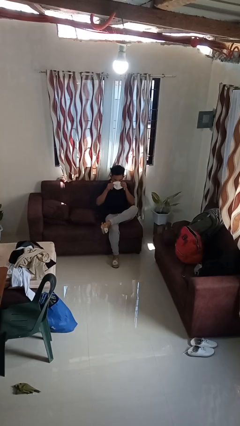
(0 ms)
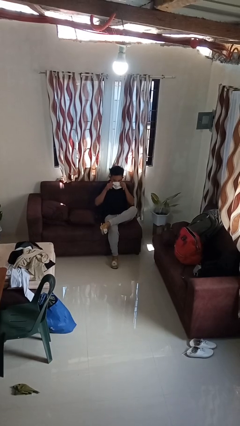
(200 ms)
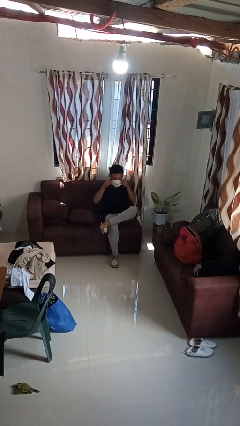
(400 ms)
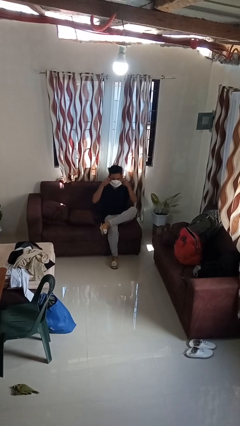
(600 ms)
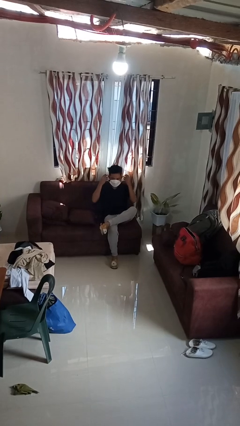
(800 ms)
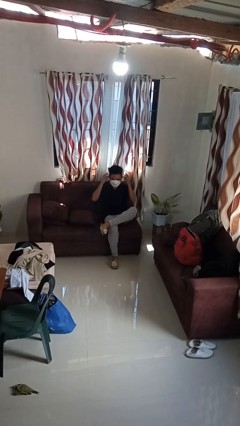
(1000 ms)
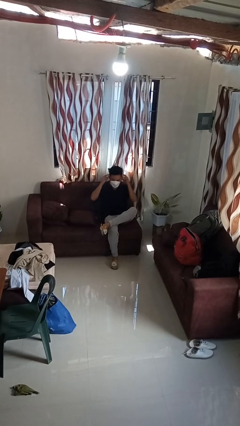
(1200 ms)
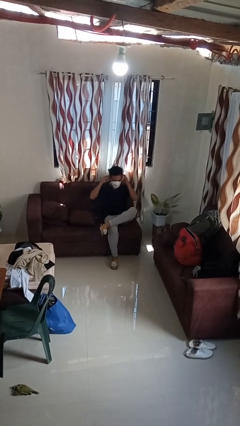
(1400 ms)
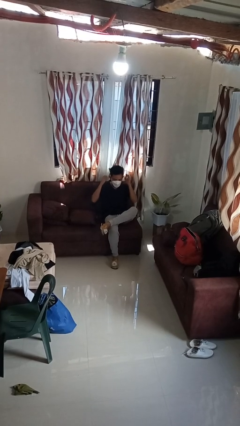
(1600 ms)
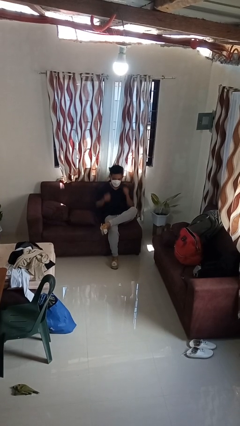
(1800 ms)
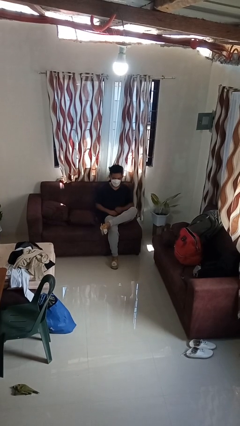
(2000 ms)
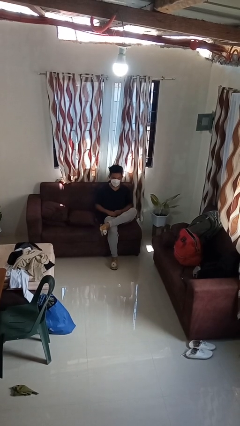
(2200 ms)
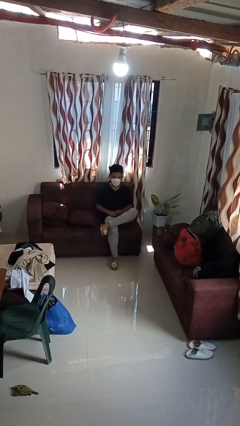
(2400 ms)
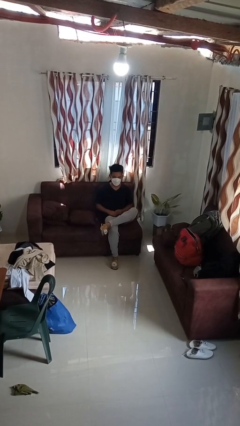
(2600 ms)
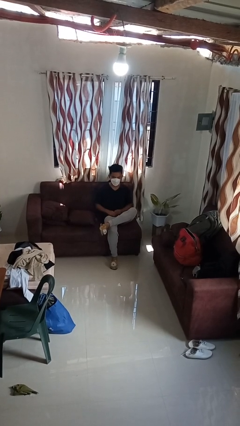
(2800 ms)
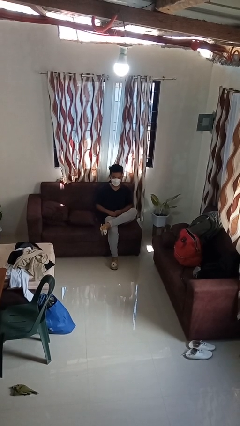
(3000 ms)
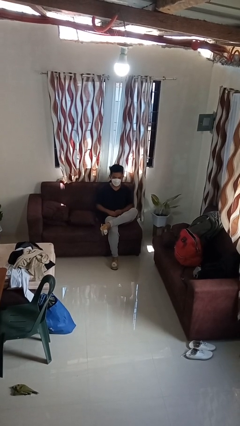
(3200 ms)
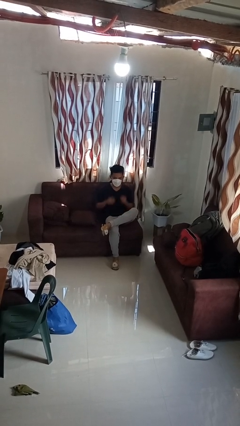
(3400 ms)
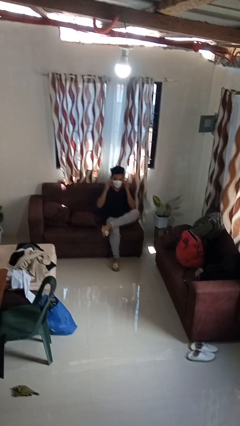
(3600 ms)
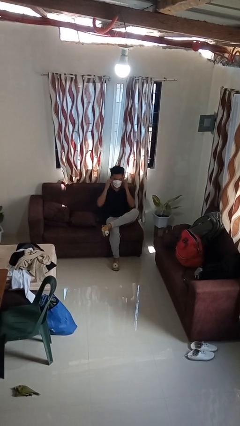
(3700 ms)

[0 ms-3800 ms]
person puts on facemask

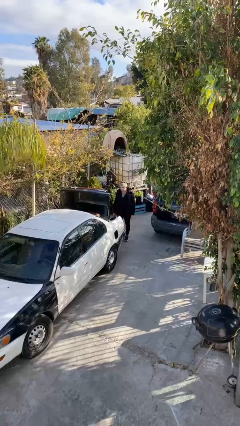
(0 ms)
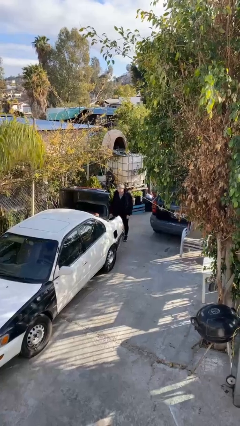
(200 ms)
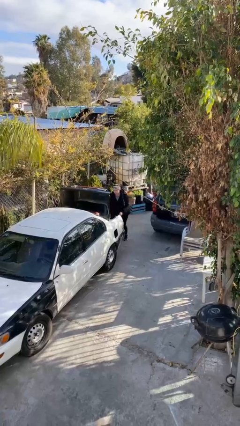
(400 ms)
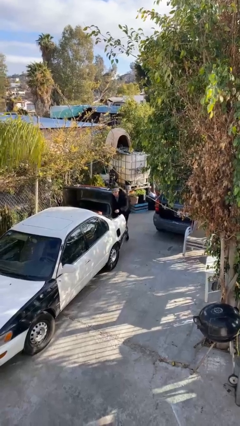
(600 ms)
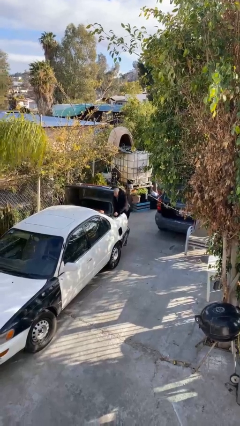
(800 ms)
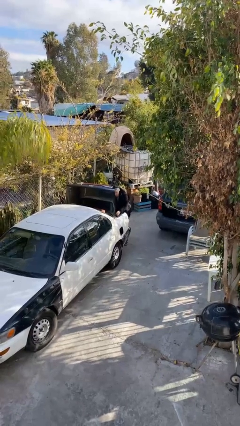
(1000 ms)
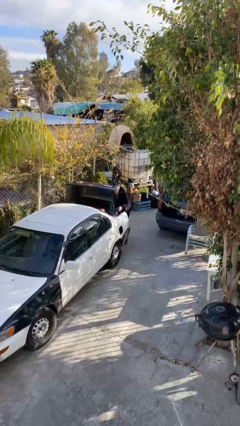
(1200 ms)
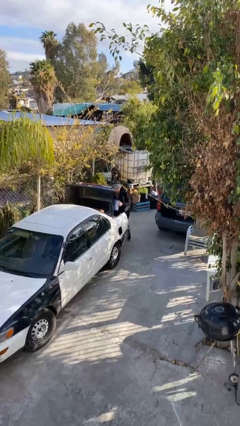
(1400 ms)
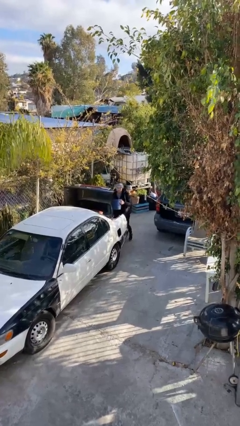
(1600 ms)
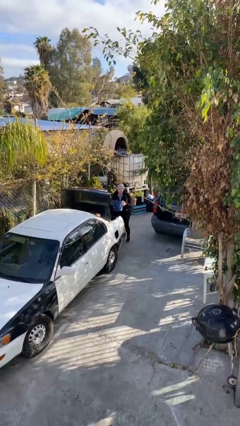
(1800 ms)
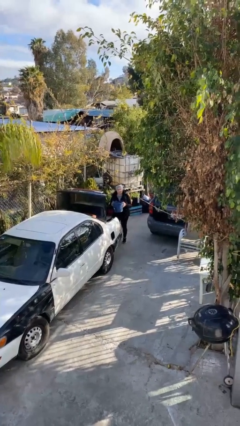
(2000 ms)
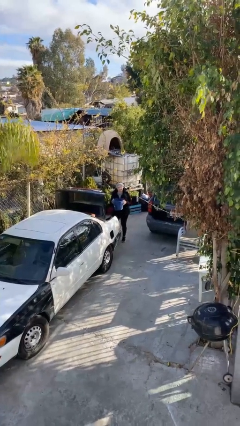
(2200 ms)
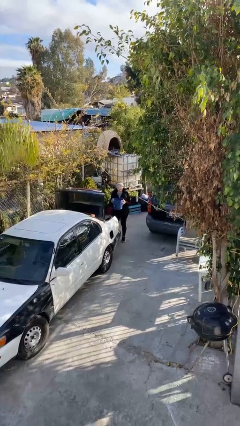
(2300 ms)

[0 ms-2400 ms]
person unloads car

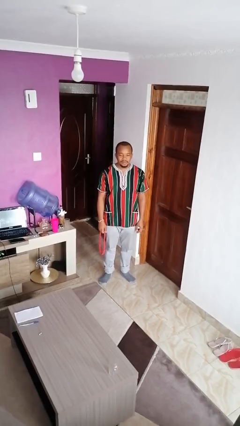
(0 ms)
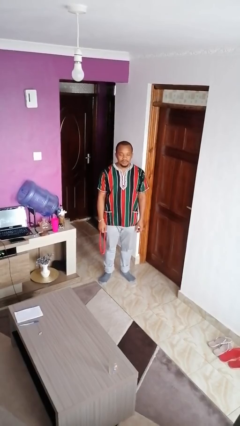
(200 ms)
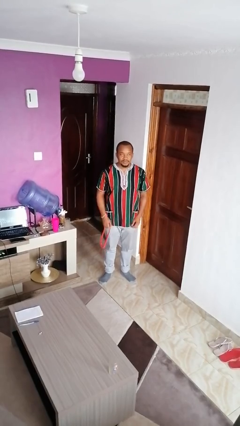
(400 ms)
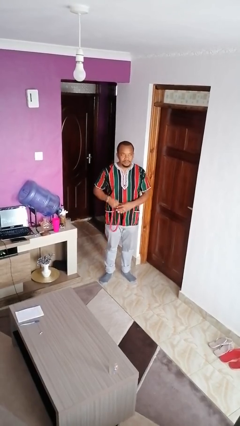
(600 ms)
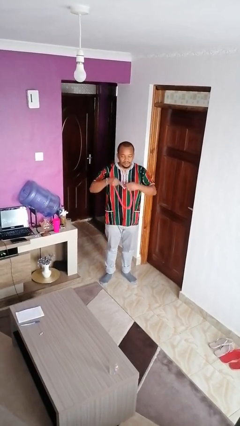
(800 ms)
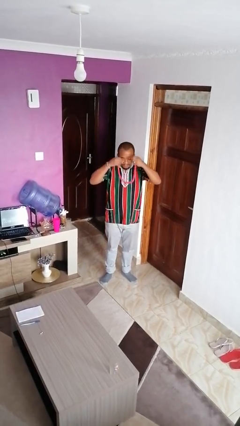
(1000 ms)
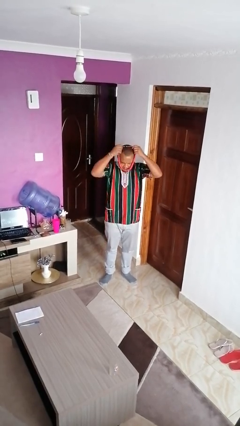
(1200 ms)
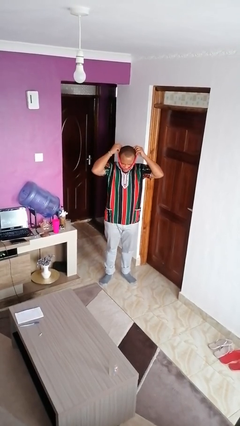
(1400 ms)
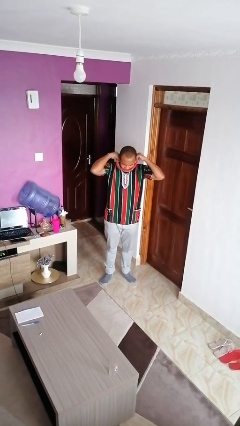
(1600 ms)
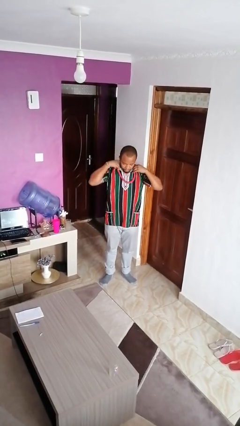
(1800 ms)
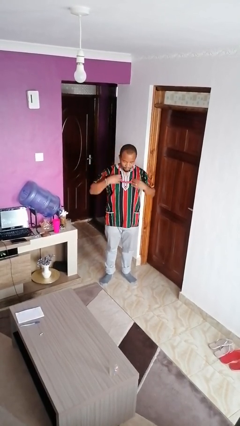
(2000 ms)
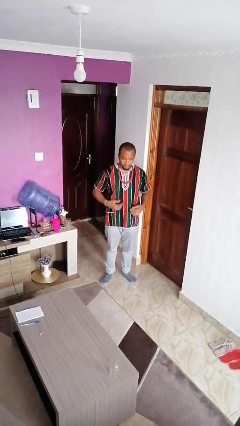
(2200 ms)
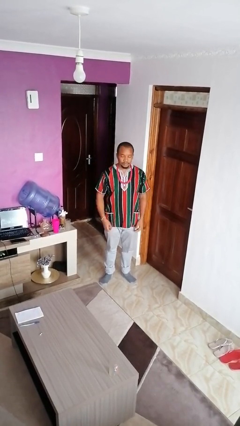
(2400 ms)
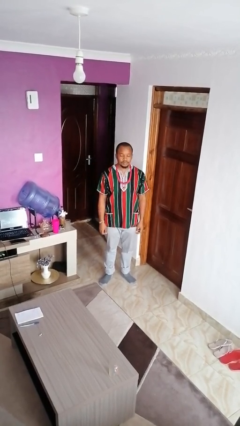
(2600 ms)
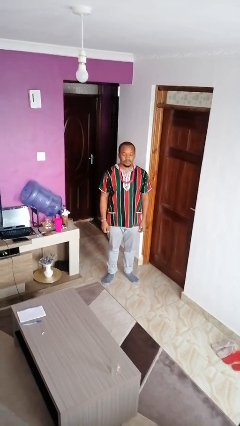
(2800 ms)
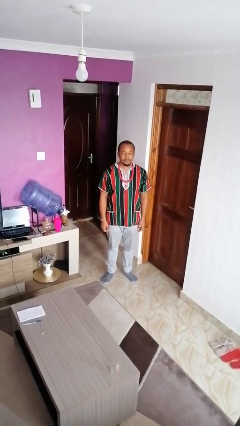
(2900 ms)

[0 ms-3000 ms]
person puts on necklace

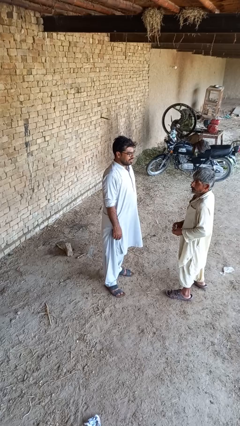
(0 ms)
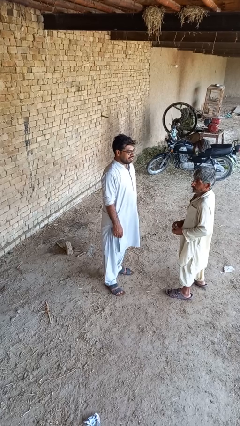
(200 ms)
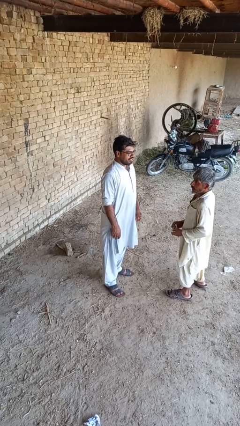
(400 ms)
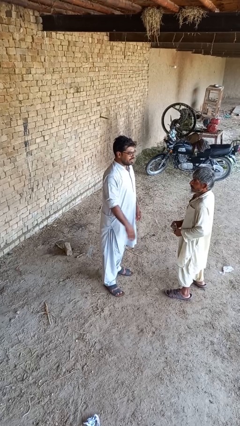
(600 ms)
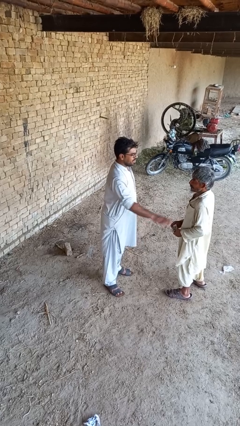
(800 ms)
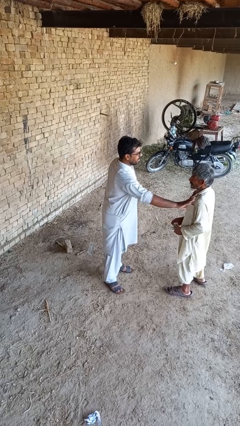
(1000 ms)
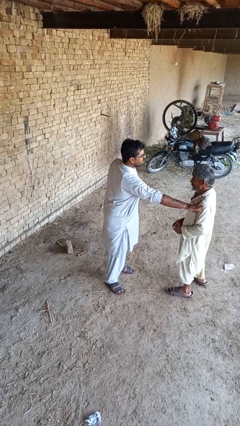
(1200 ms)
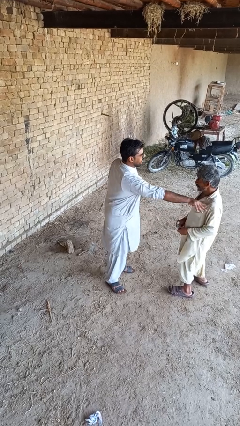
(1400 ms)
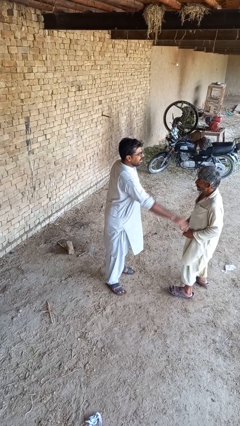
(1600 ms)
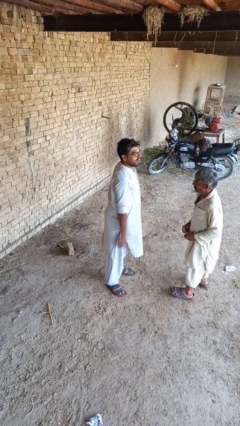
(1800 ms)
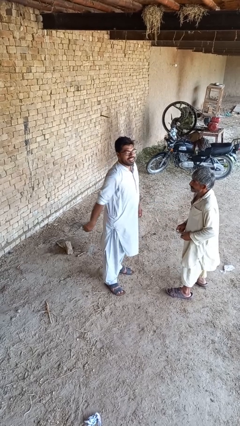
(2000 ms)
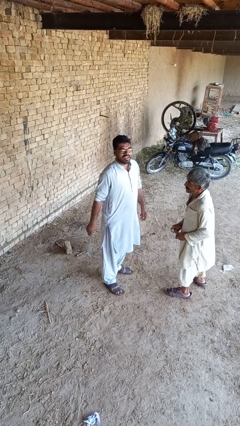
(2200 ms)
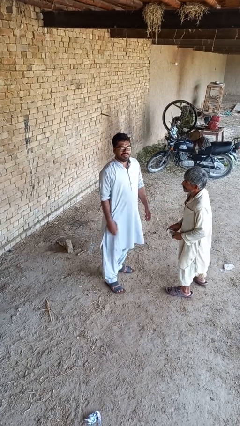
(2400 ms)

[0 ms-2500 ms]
person shoves person

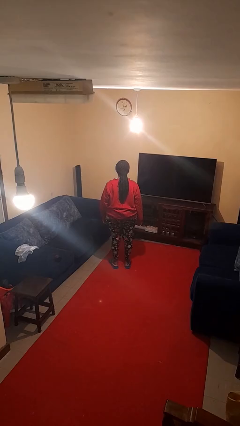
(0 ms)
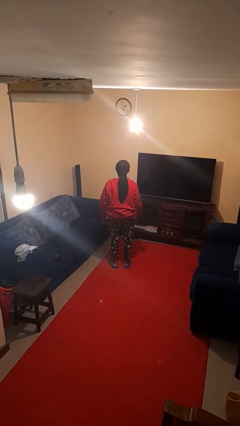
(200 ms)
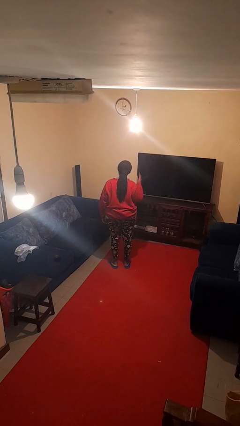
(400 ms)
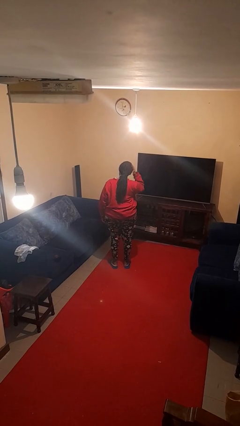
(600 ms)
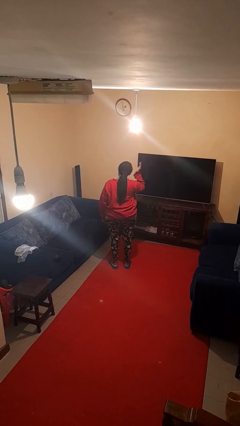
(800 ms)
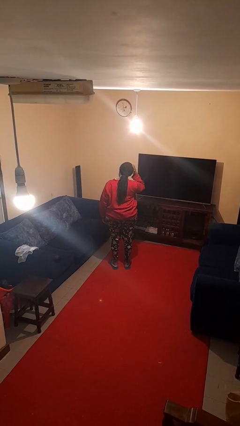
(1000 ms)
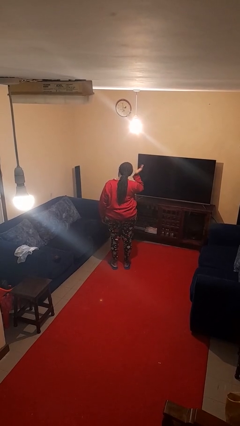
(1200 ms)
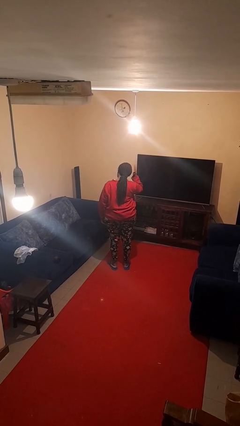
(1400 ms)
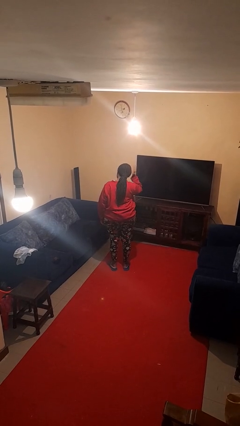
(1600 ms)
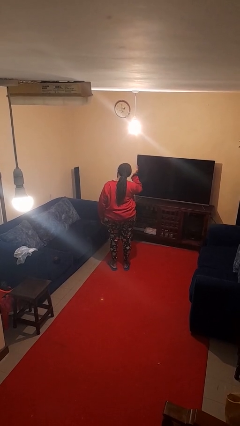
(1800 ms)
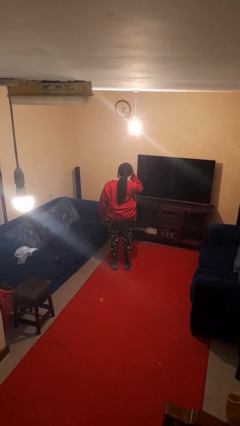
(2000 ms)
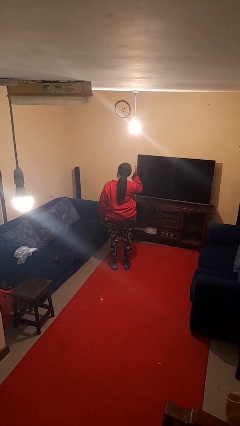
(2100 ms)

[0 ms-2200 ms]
person pats head

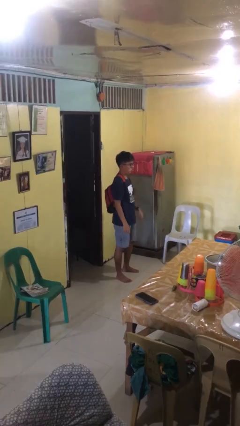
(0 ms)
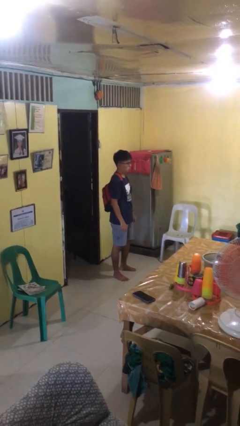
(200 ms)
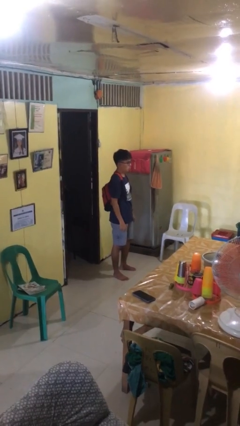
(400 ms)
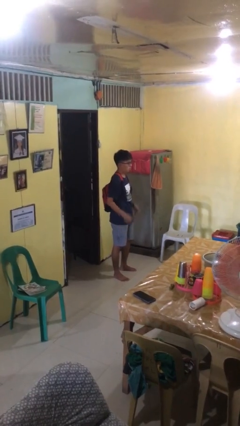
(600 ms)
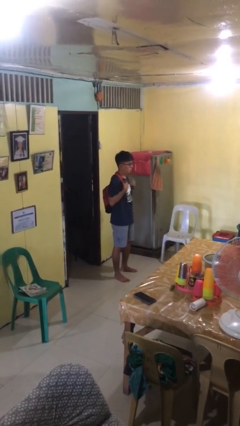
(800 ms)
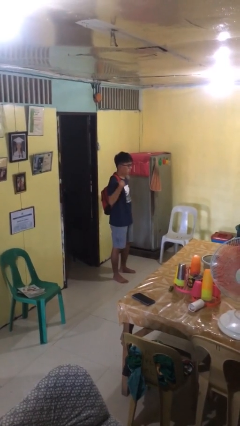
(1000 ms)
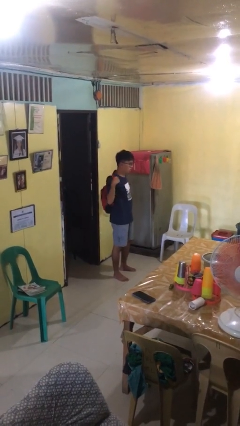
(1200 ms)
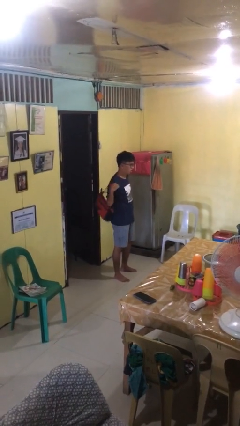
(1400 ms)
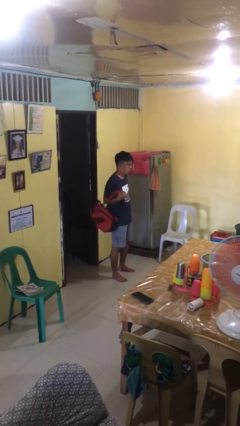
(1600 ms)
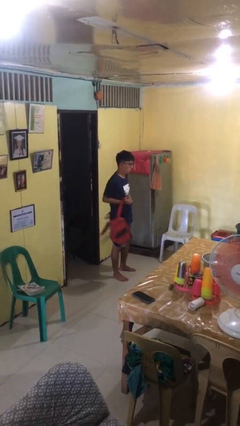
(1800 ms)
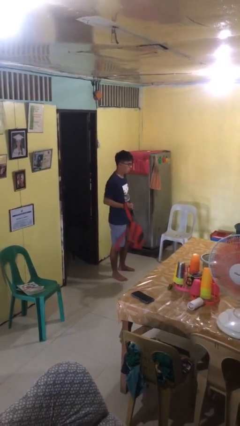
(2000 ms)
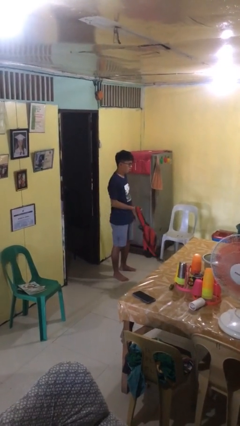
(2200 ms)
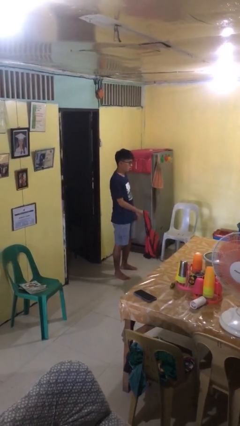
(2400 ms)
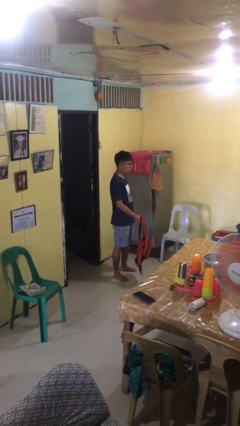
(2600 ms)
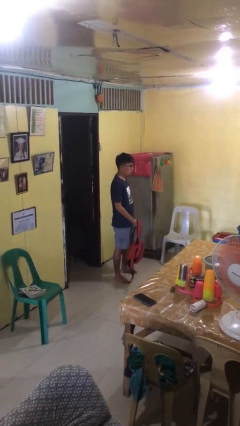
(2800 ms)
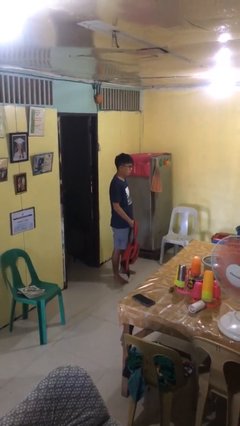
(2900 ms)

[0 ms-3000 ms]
person takes off backpack

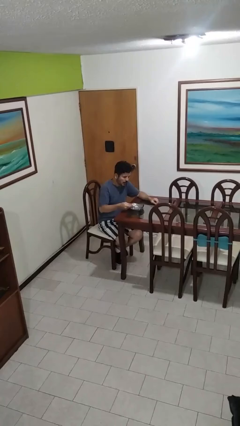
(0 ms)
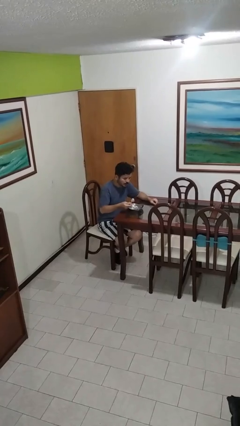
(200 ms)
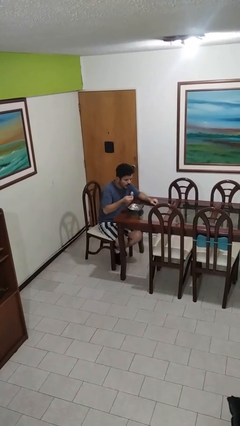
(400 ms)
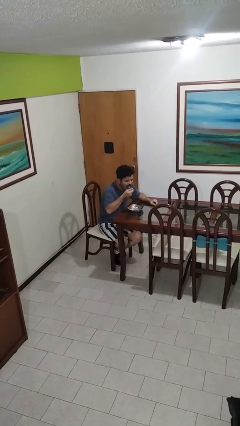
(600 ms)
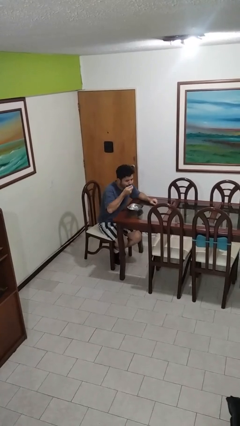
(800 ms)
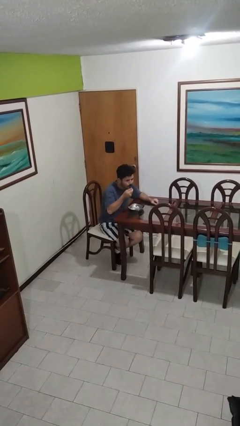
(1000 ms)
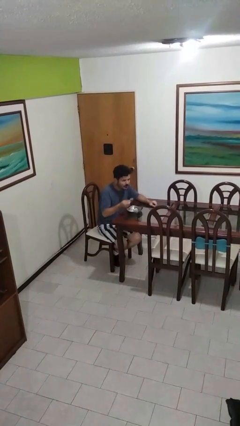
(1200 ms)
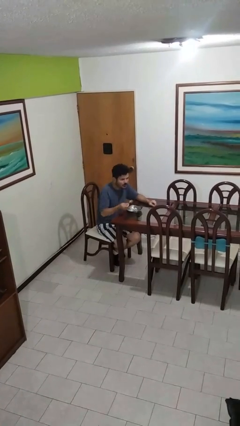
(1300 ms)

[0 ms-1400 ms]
person eats with utensil
